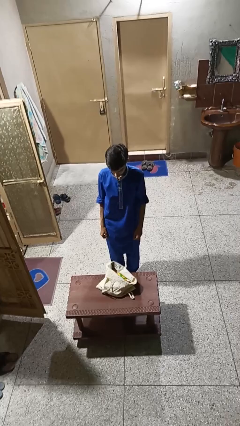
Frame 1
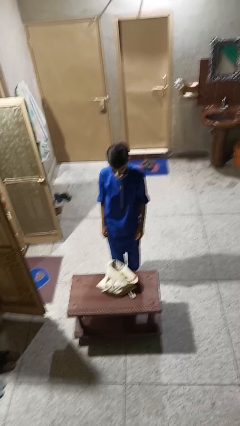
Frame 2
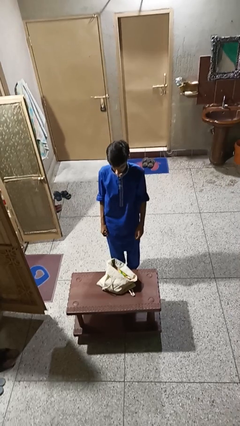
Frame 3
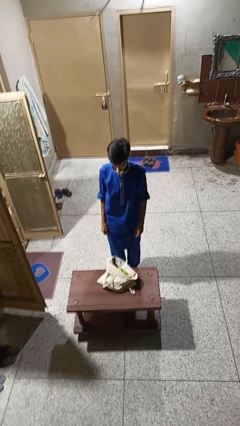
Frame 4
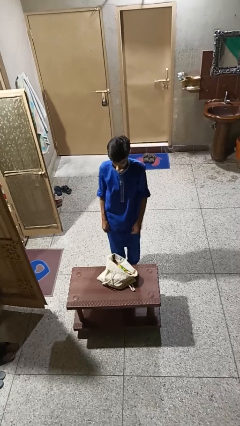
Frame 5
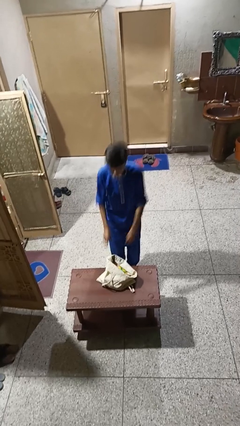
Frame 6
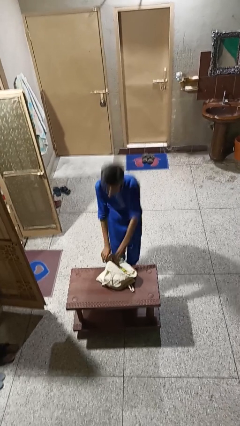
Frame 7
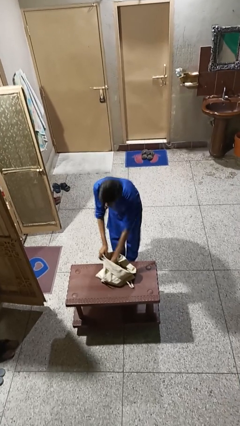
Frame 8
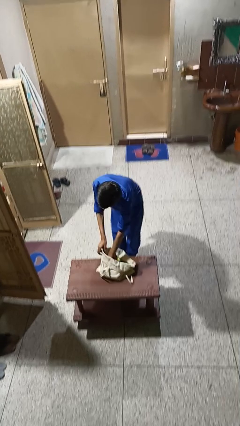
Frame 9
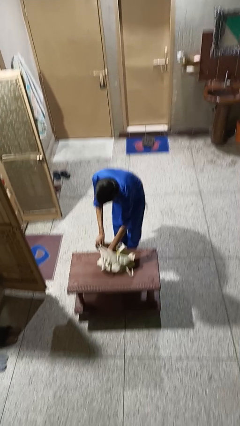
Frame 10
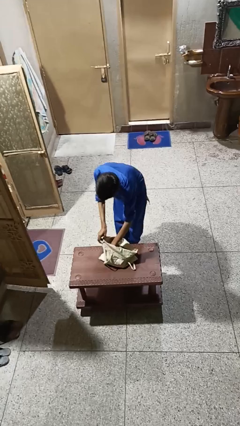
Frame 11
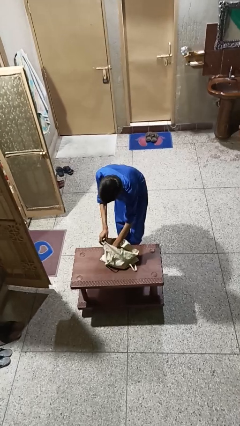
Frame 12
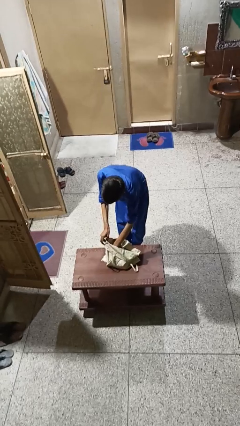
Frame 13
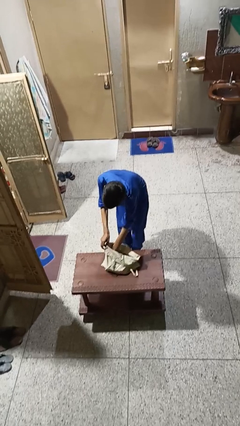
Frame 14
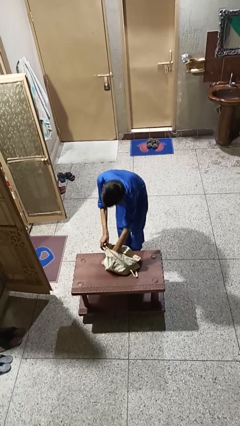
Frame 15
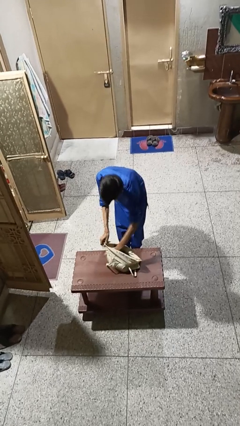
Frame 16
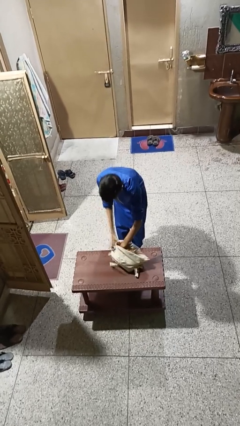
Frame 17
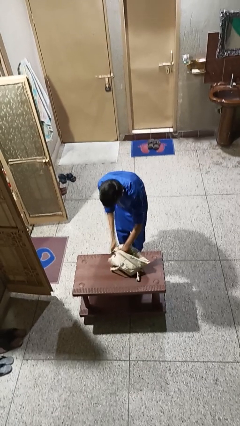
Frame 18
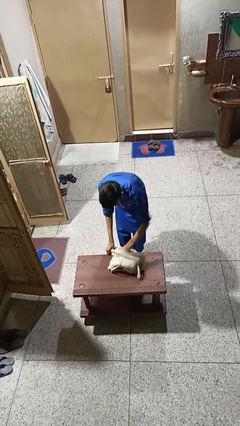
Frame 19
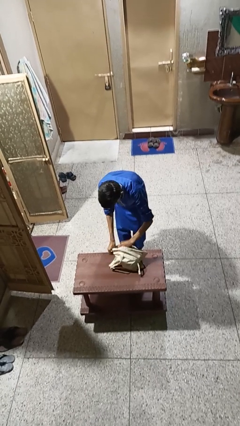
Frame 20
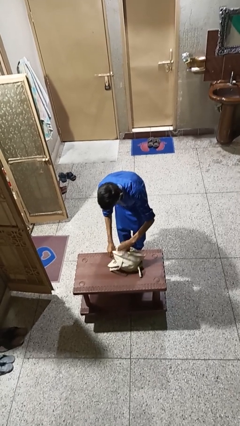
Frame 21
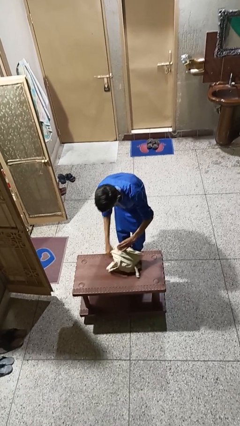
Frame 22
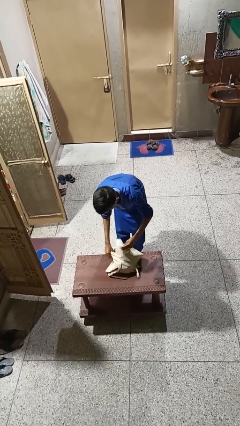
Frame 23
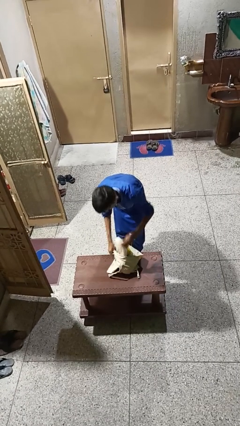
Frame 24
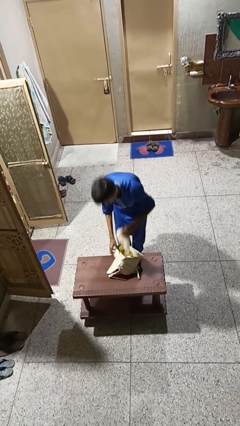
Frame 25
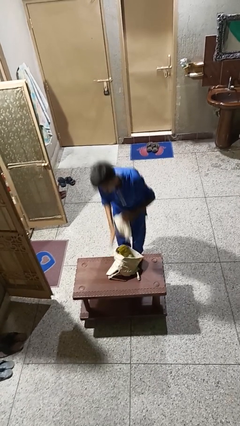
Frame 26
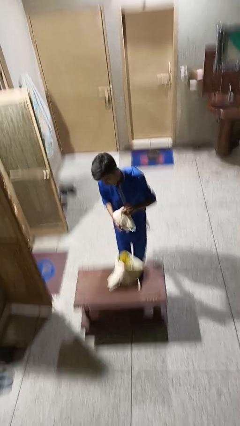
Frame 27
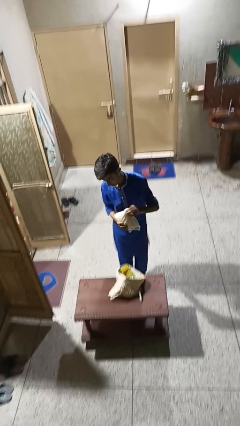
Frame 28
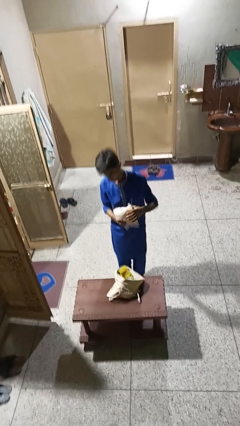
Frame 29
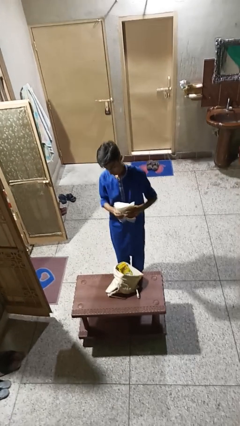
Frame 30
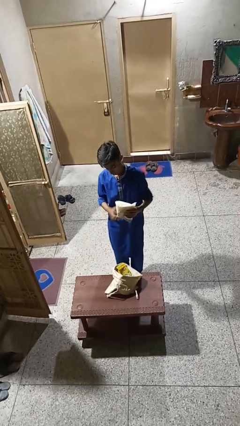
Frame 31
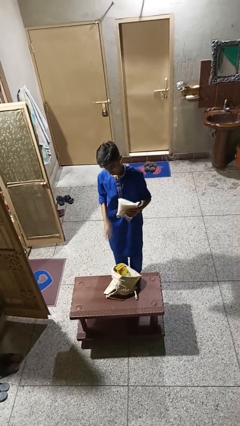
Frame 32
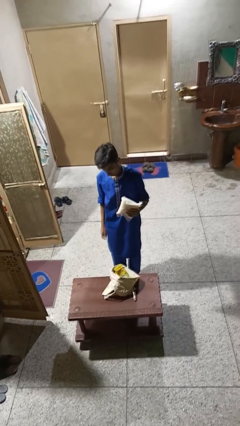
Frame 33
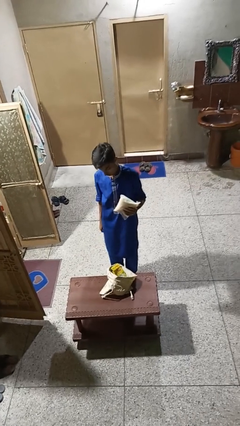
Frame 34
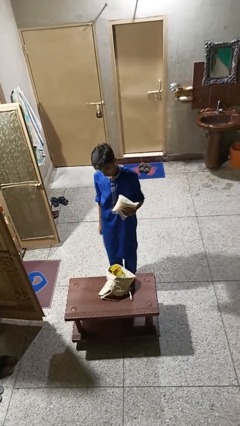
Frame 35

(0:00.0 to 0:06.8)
person takes object from bag

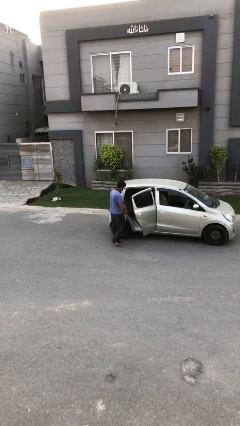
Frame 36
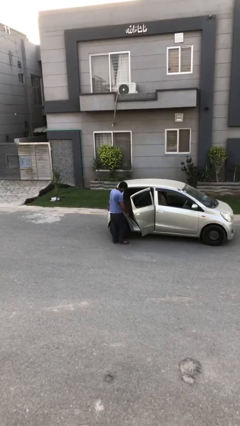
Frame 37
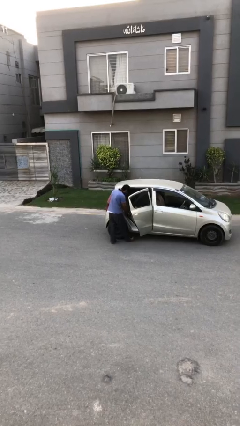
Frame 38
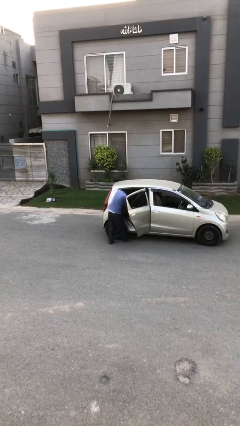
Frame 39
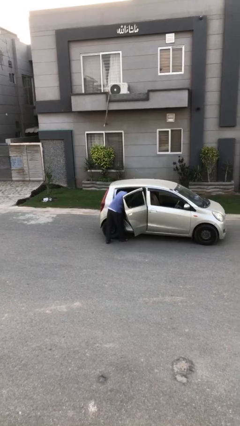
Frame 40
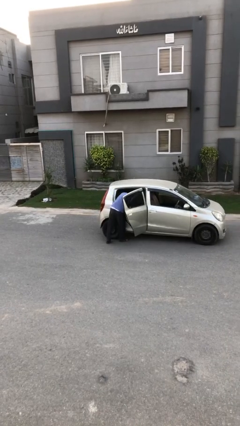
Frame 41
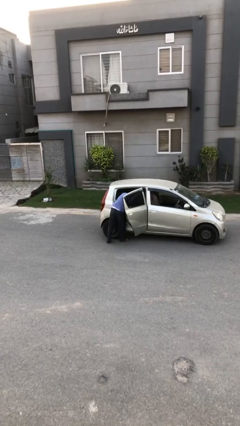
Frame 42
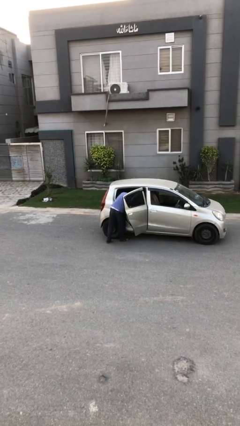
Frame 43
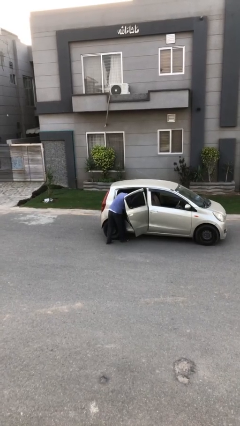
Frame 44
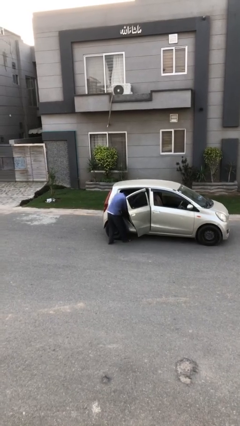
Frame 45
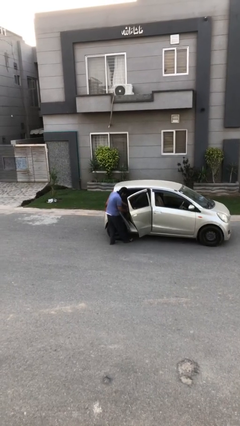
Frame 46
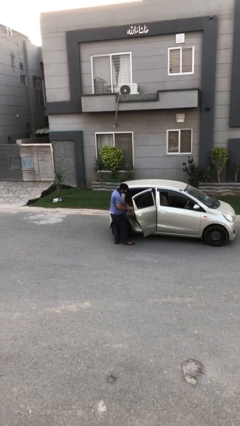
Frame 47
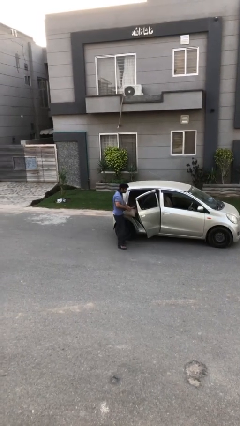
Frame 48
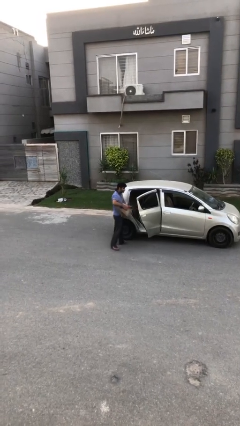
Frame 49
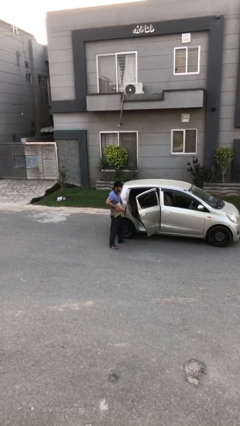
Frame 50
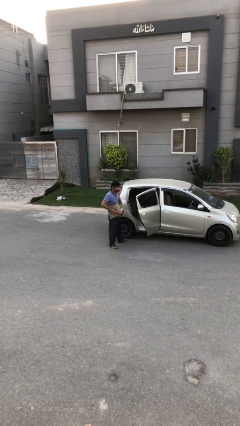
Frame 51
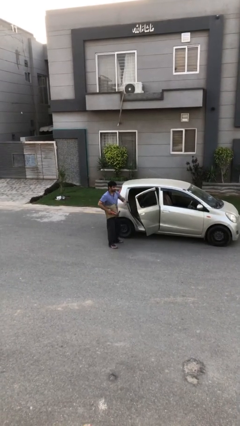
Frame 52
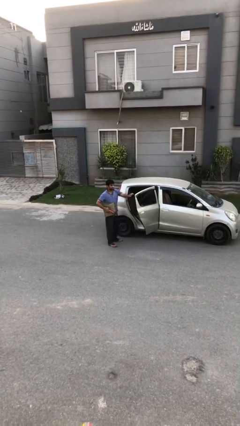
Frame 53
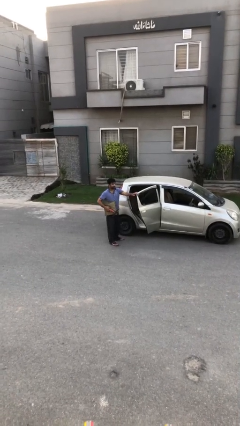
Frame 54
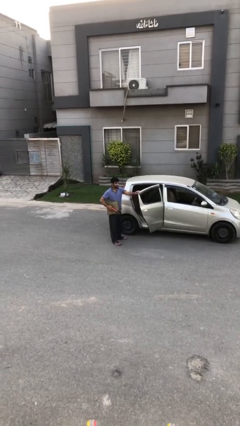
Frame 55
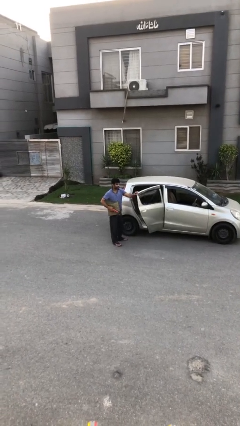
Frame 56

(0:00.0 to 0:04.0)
person unloads car

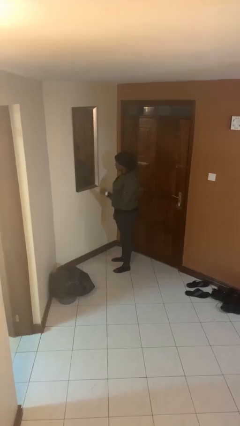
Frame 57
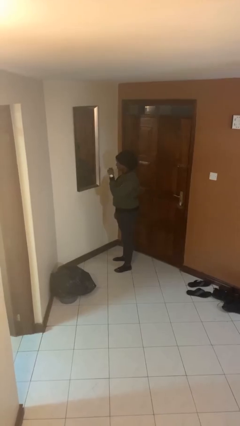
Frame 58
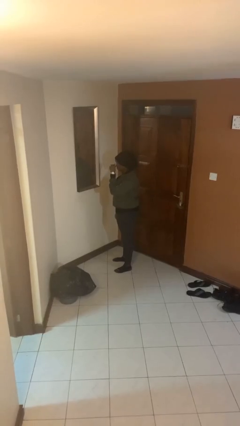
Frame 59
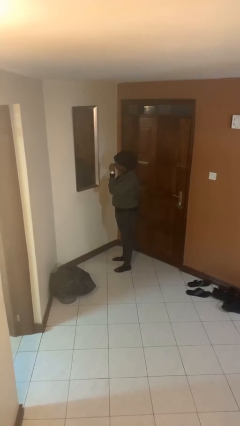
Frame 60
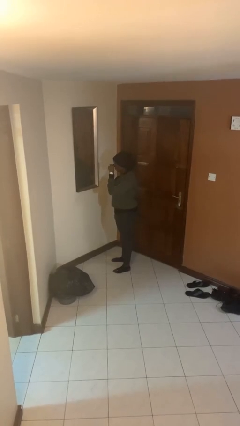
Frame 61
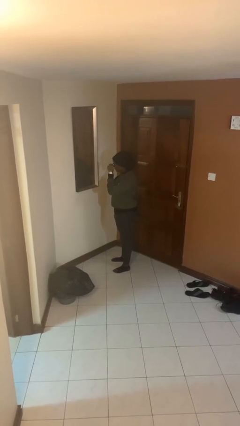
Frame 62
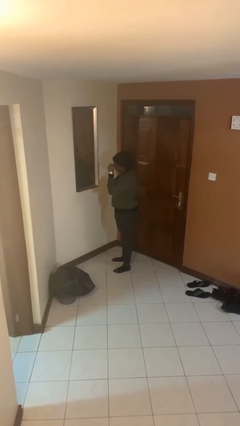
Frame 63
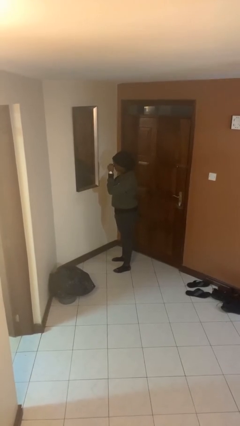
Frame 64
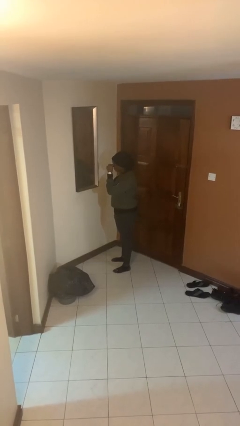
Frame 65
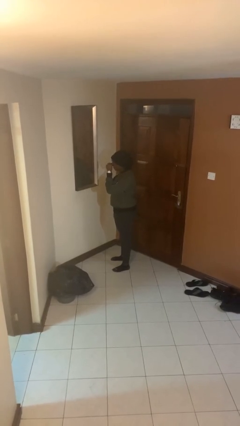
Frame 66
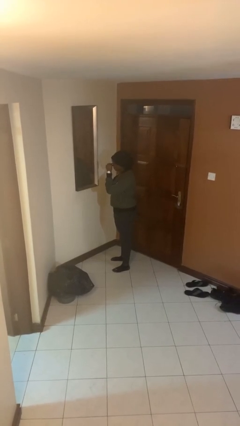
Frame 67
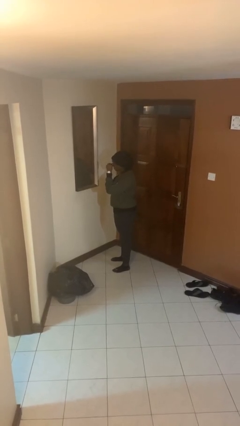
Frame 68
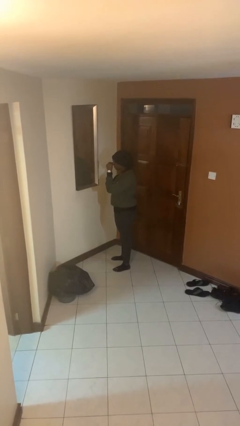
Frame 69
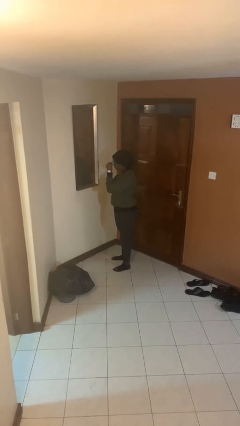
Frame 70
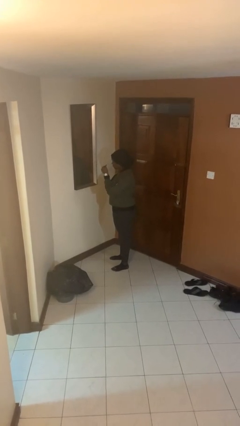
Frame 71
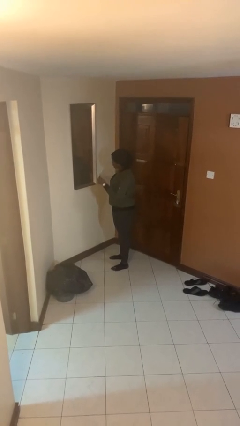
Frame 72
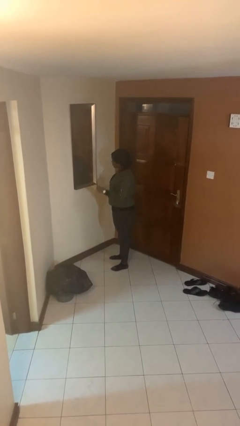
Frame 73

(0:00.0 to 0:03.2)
person applies eye makeup

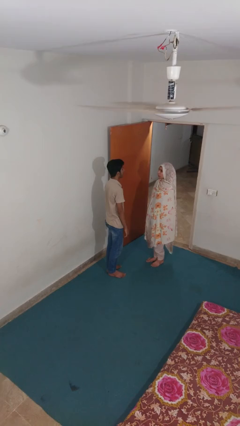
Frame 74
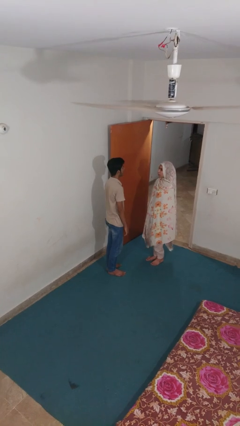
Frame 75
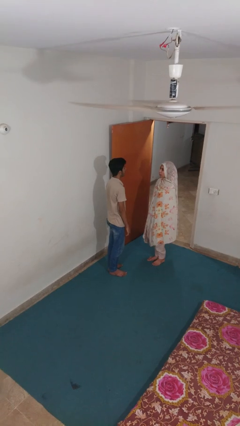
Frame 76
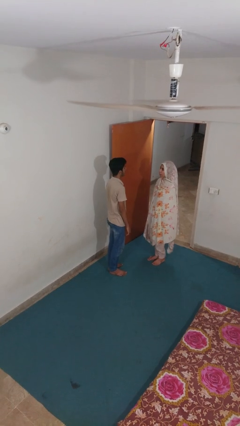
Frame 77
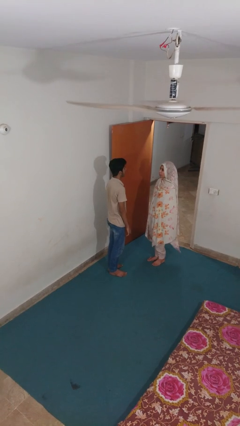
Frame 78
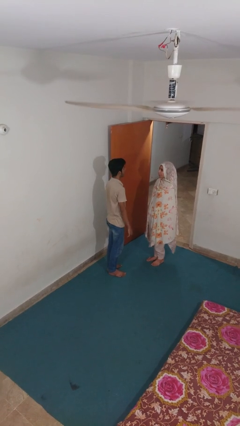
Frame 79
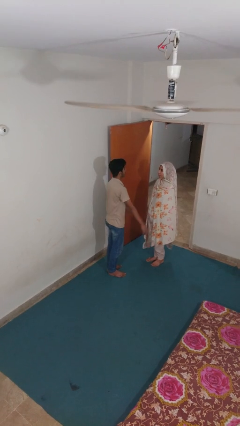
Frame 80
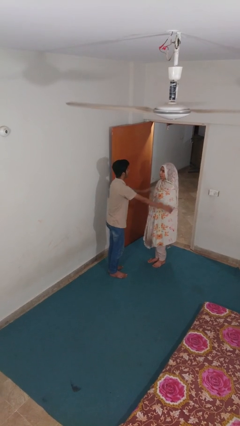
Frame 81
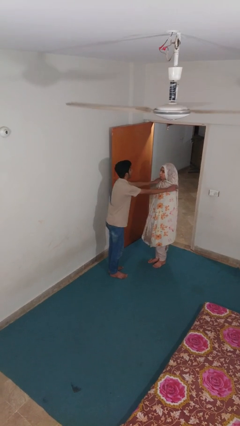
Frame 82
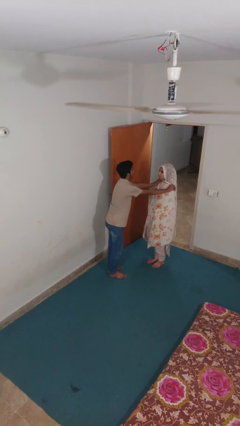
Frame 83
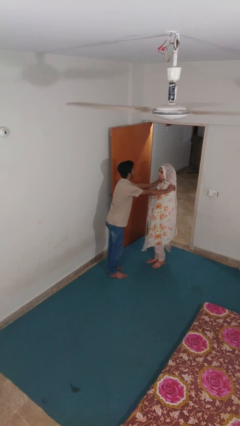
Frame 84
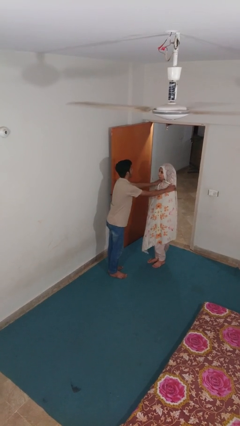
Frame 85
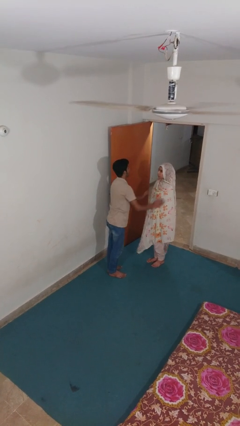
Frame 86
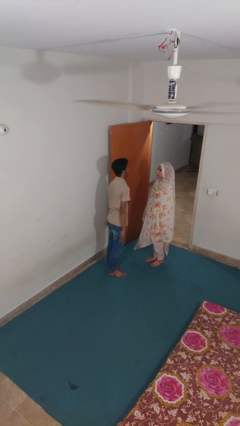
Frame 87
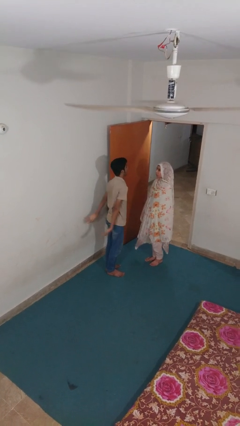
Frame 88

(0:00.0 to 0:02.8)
person pounds shoulders of person

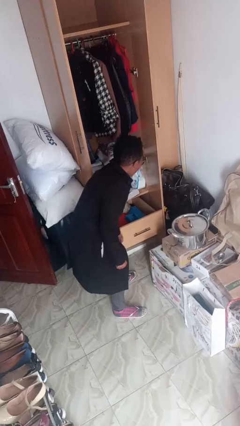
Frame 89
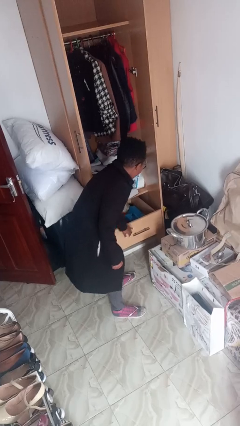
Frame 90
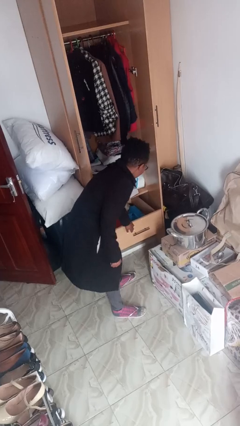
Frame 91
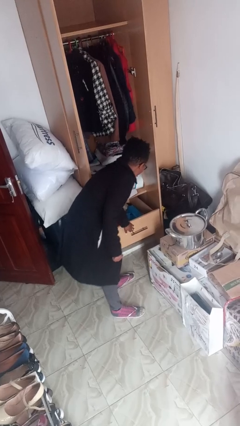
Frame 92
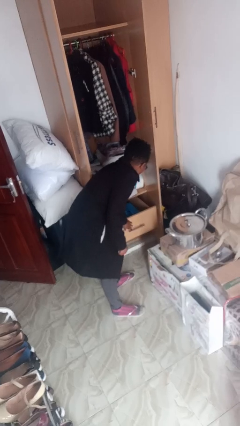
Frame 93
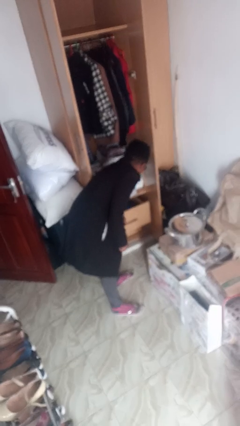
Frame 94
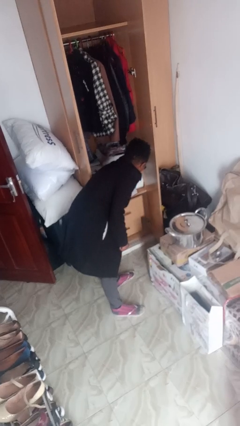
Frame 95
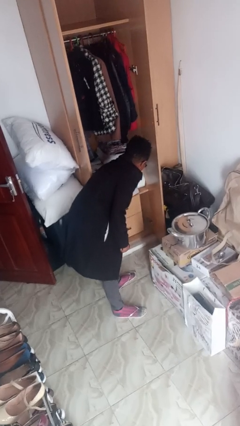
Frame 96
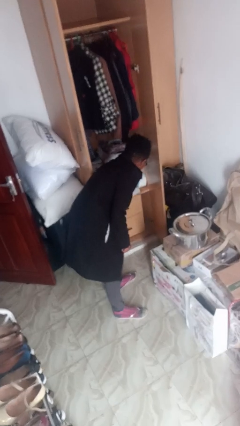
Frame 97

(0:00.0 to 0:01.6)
person closes dresser drawer
